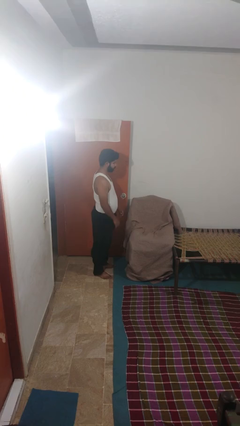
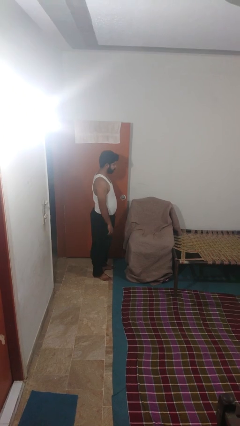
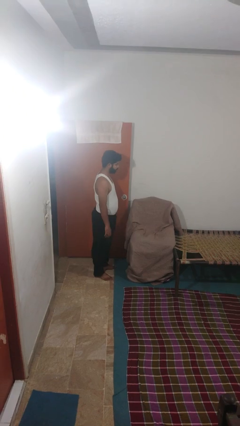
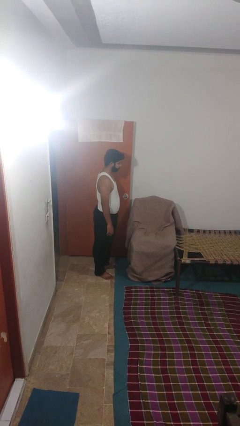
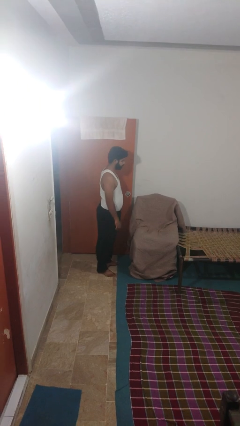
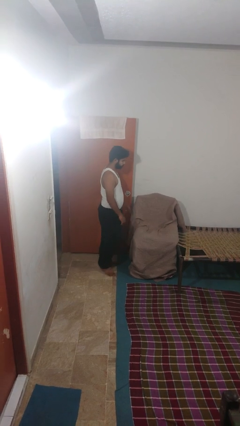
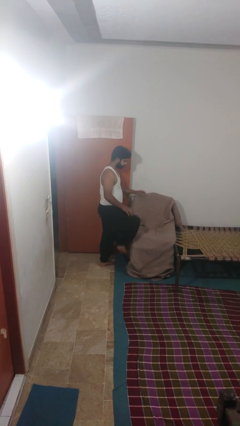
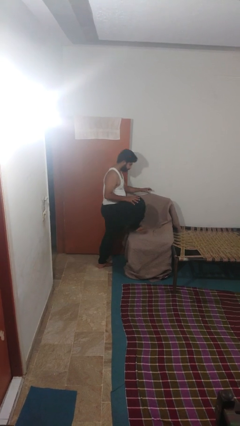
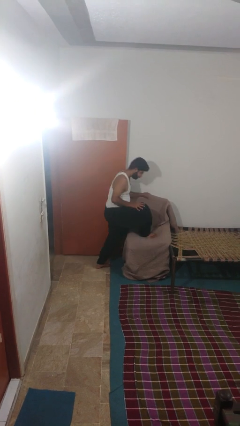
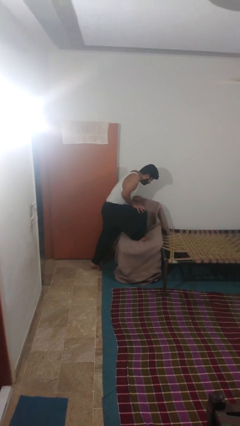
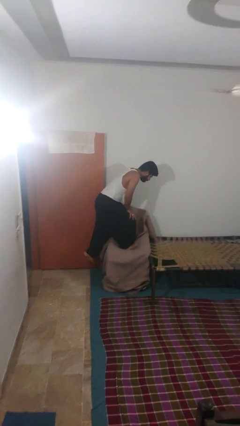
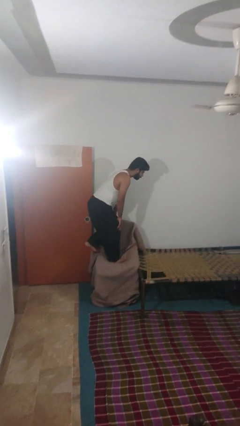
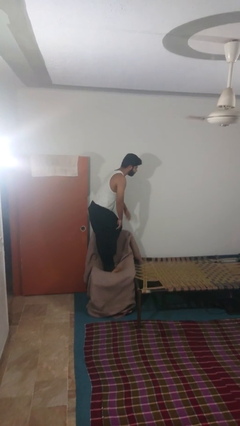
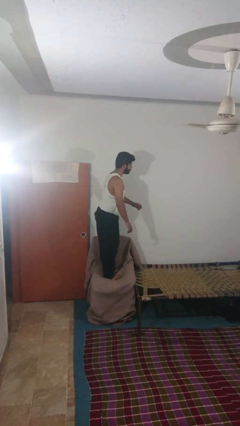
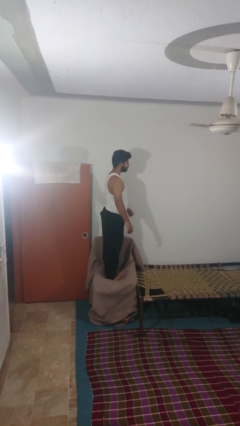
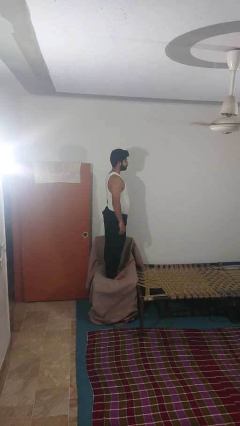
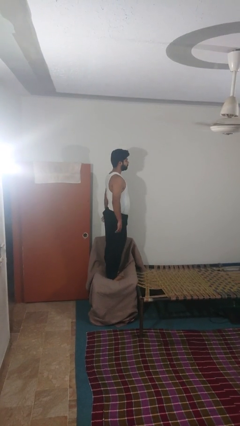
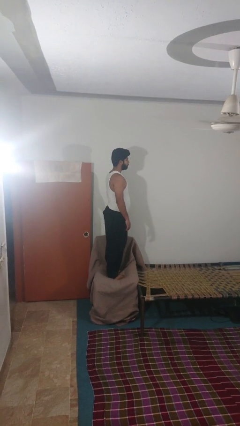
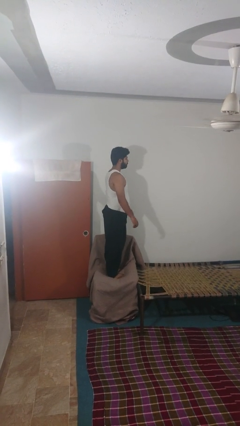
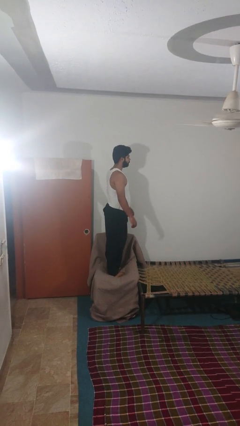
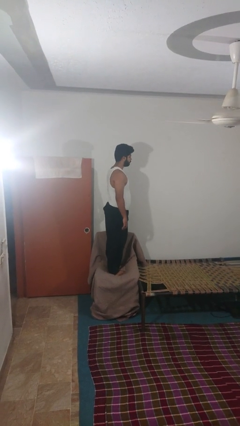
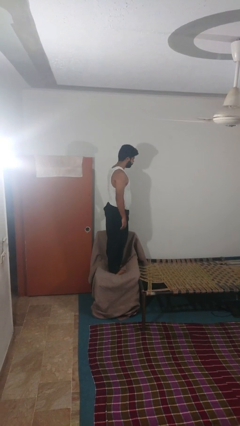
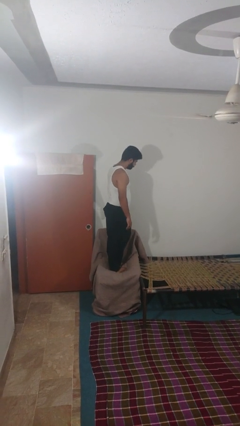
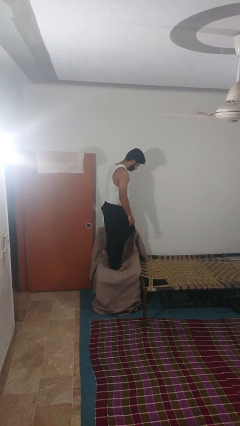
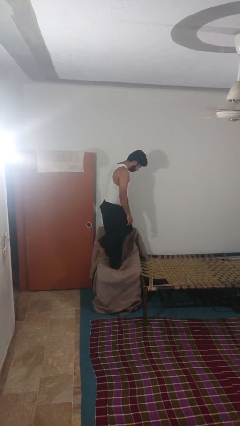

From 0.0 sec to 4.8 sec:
person climbs on couch

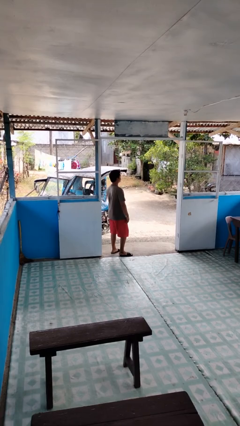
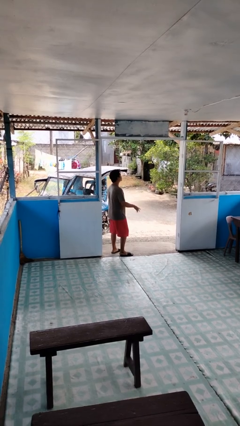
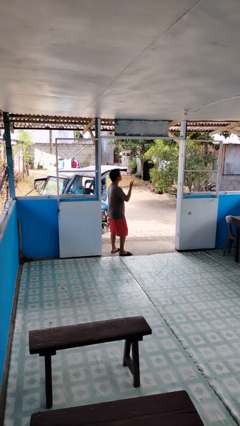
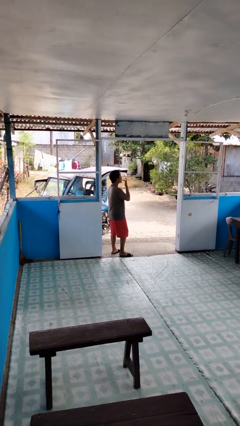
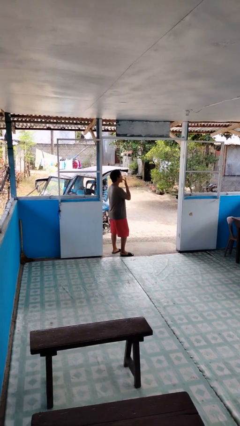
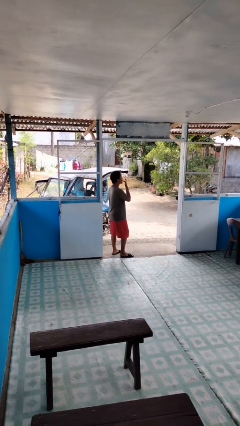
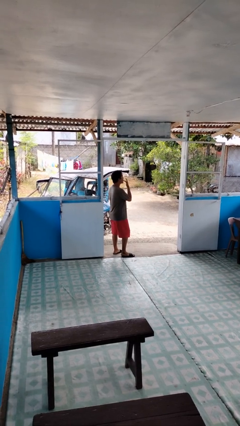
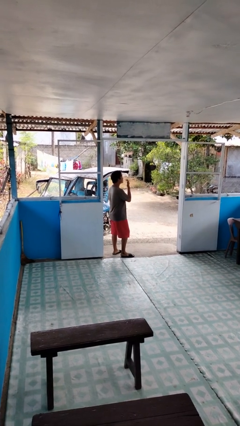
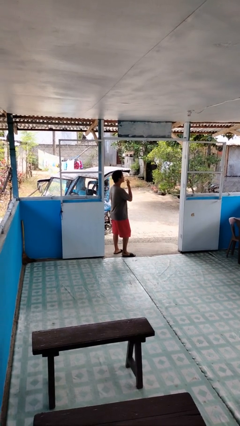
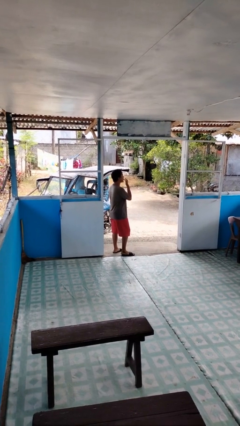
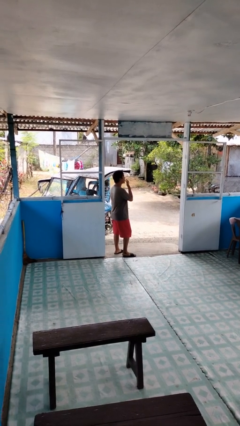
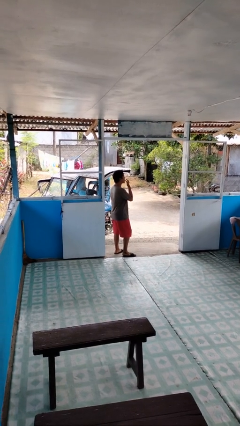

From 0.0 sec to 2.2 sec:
person licks fingers

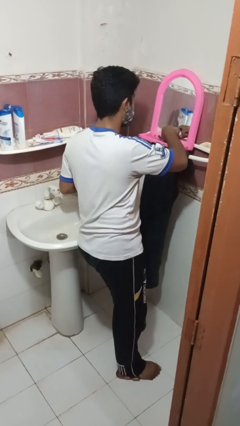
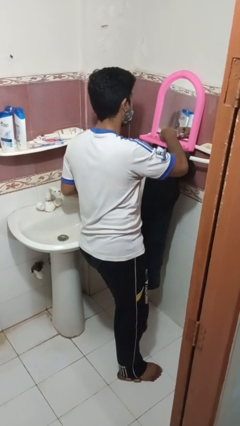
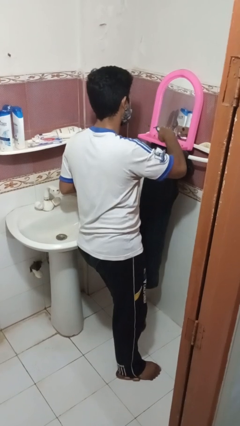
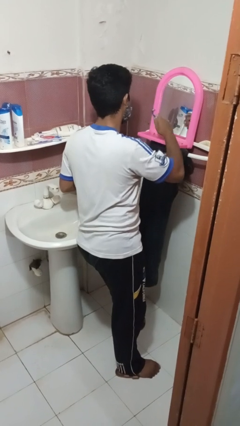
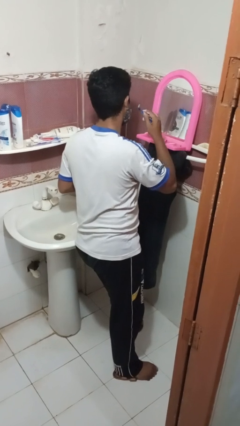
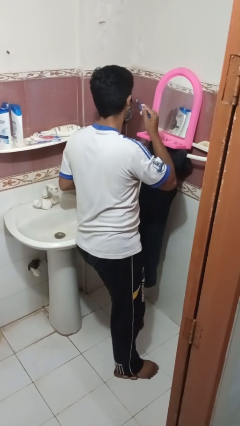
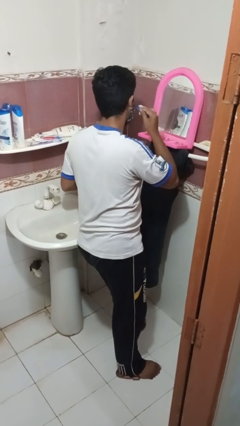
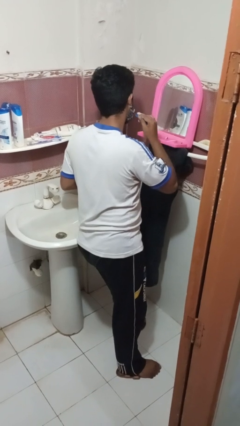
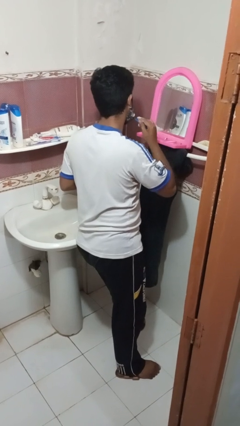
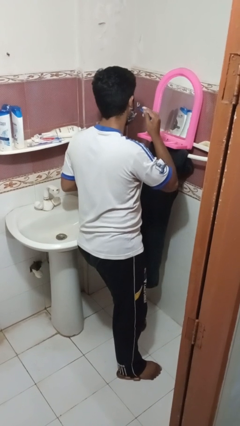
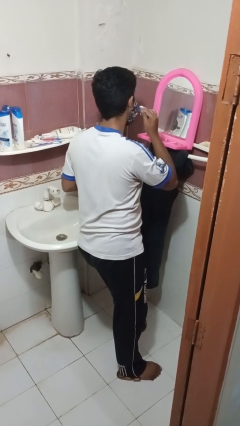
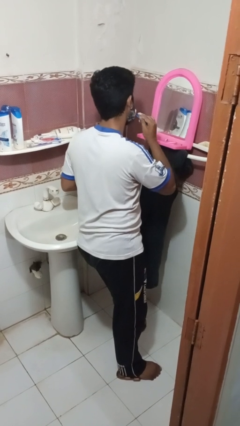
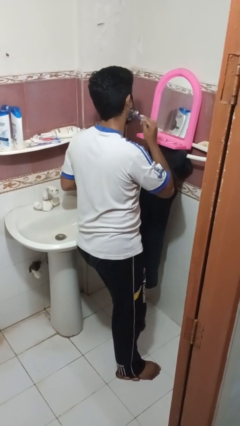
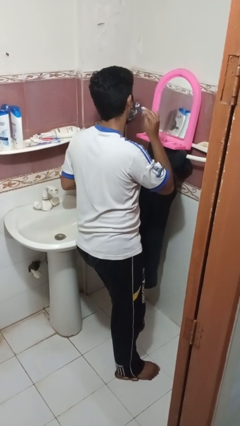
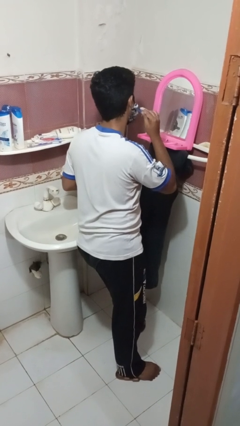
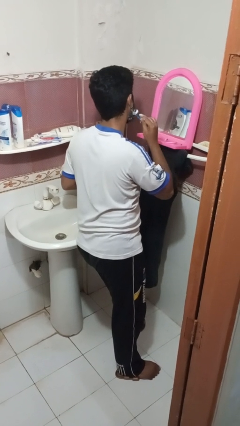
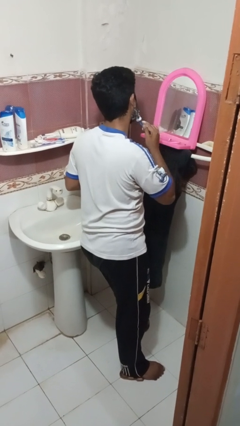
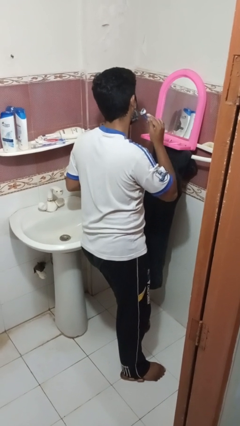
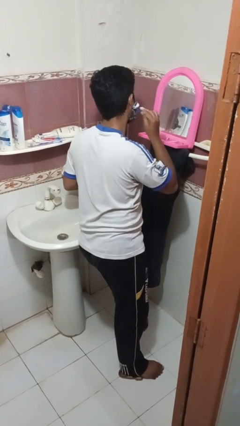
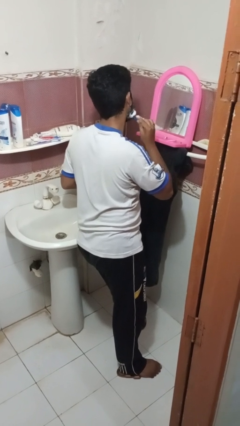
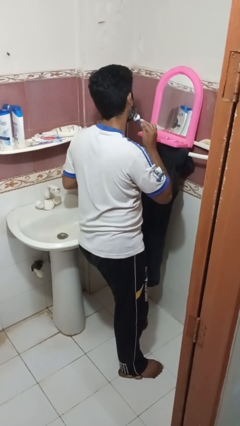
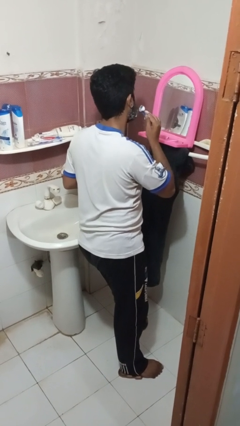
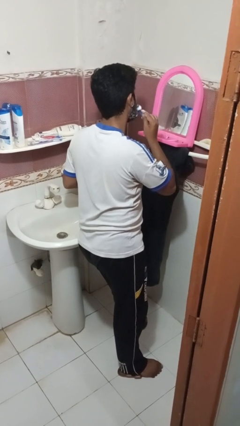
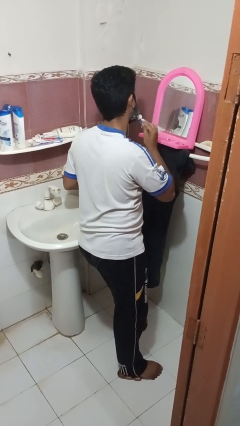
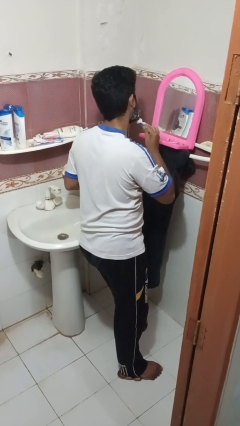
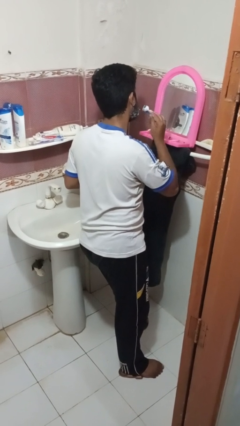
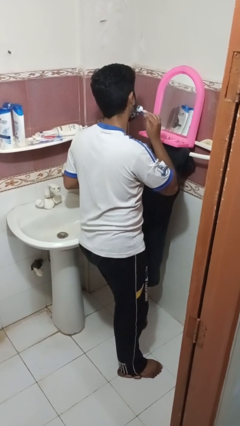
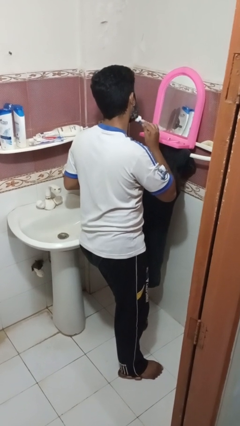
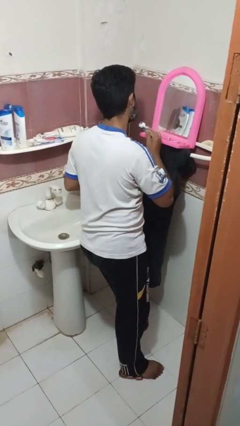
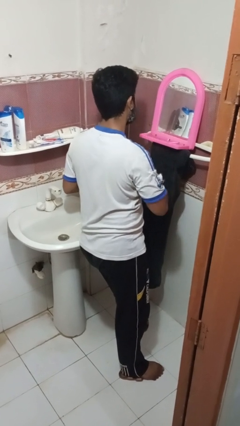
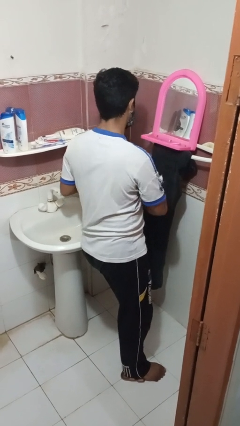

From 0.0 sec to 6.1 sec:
person shaves face

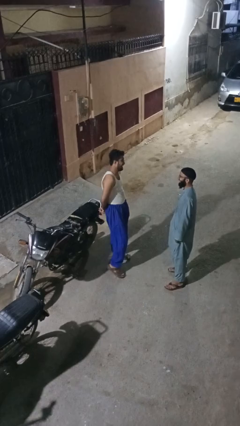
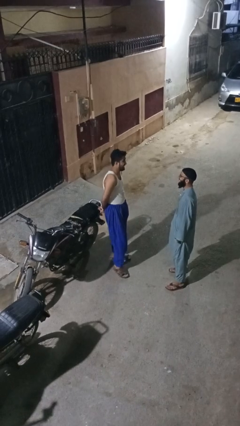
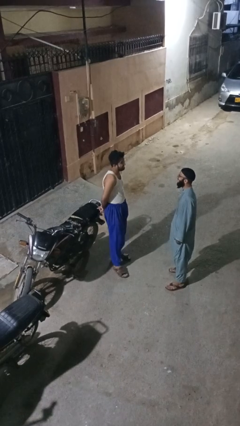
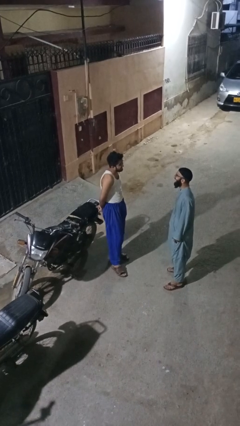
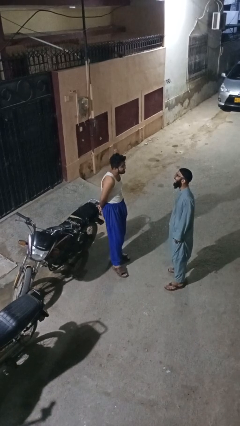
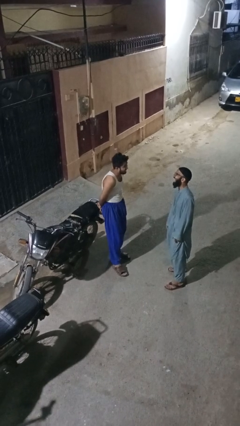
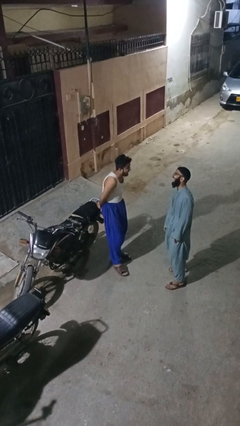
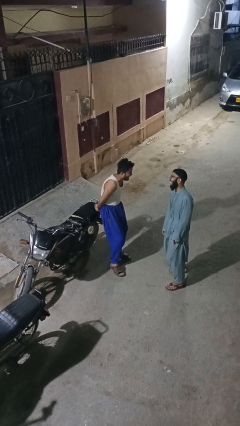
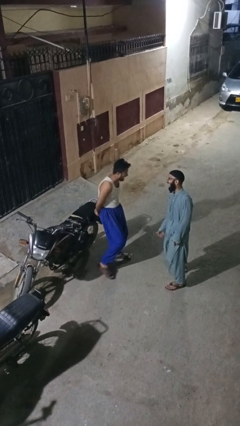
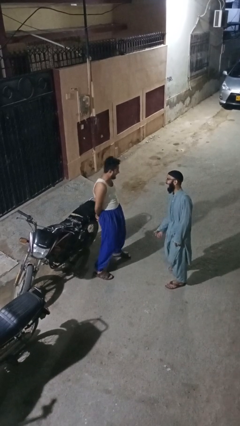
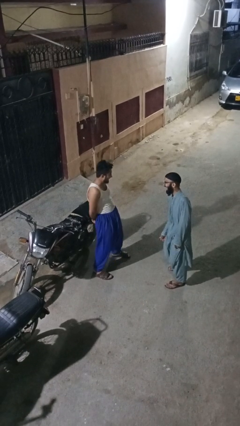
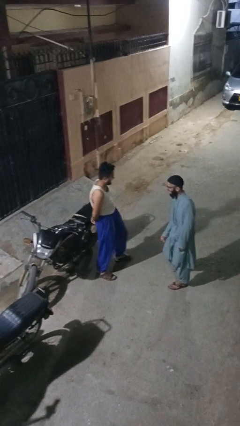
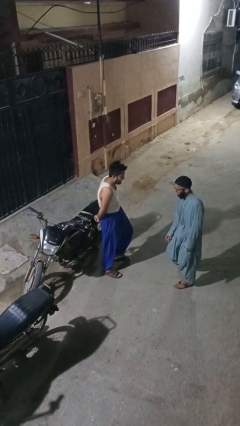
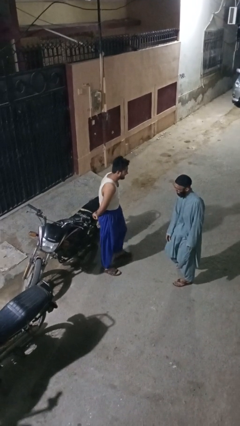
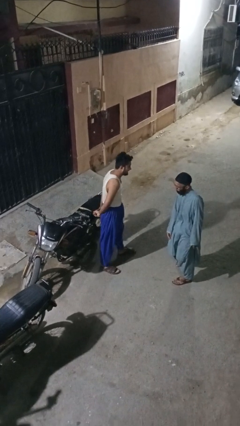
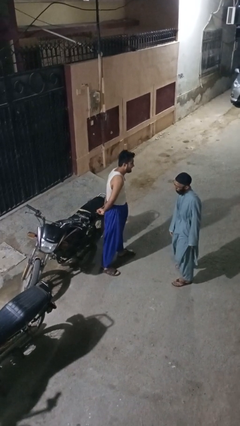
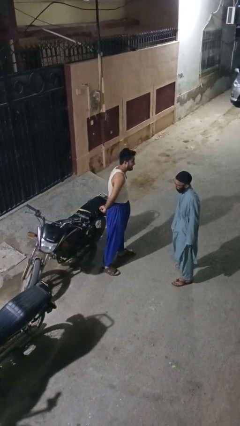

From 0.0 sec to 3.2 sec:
person laughs with person

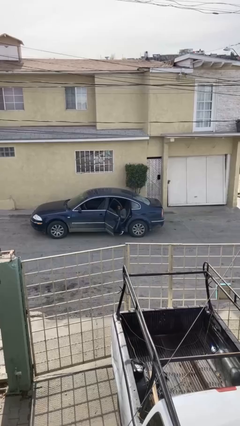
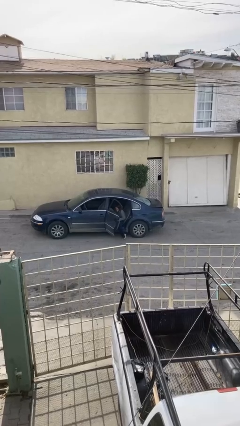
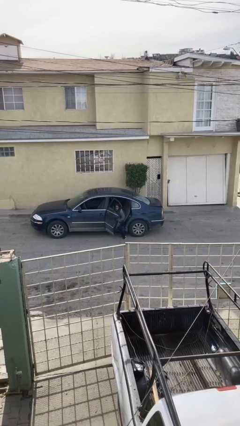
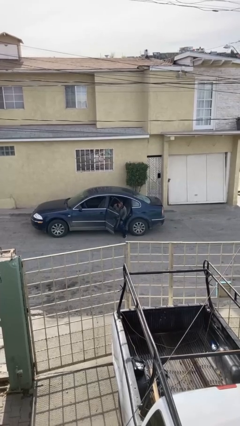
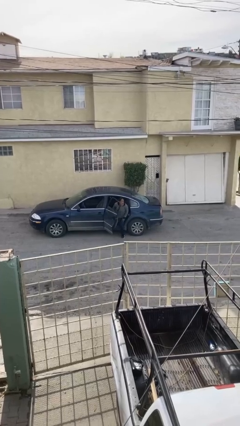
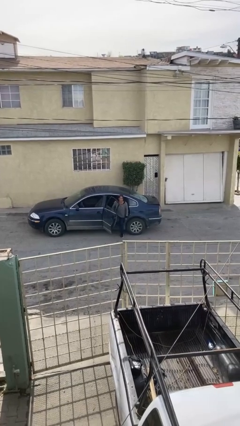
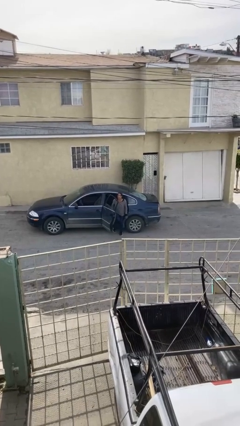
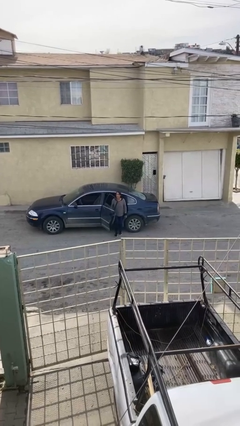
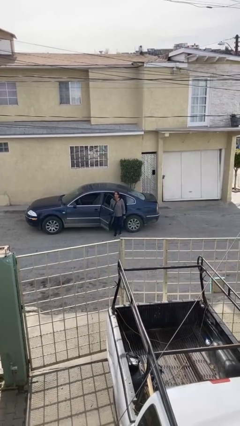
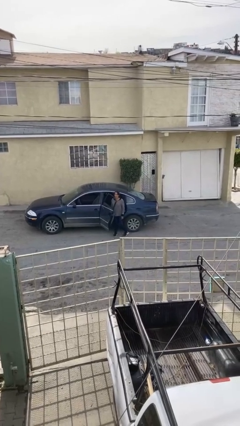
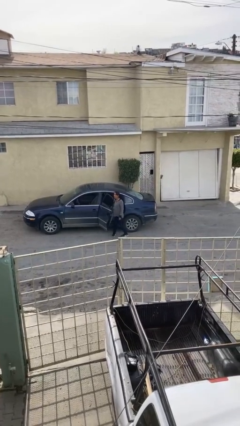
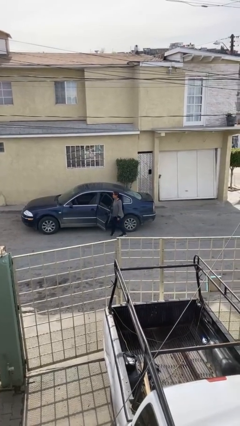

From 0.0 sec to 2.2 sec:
person exits car
